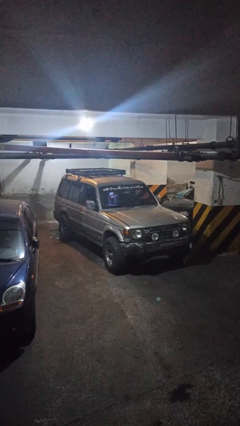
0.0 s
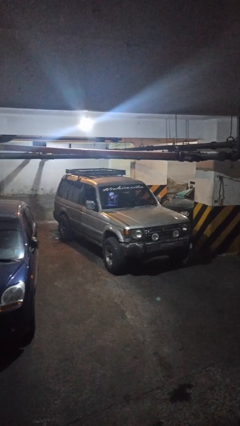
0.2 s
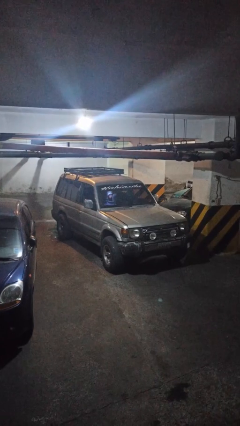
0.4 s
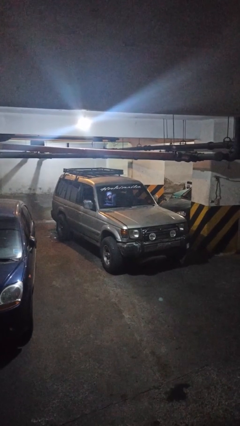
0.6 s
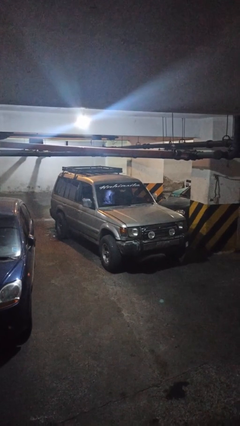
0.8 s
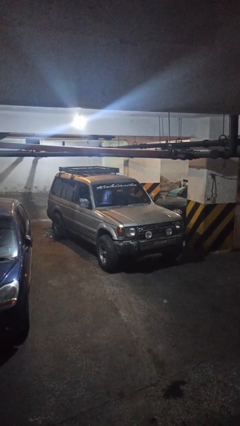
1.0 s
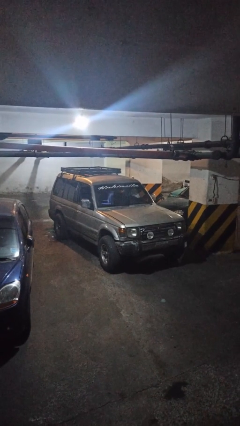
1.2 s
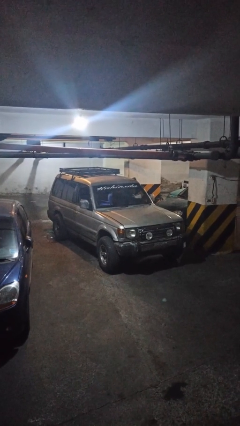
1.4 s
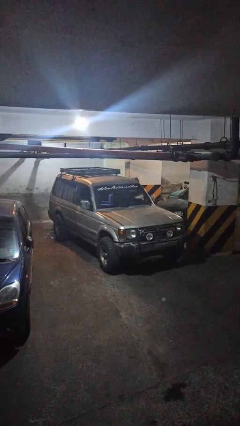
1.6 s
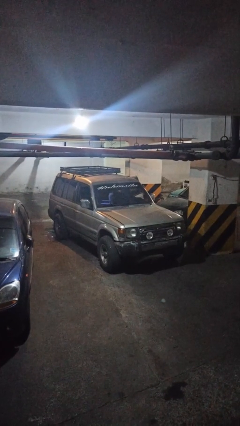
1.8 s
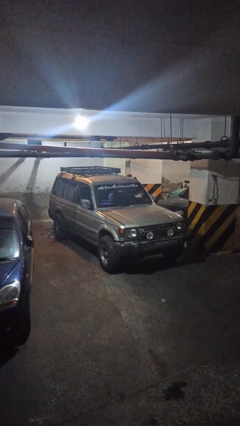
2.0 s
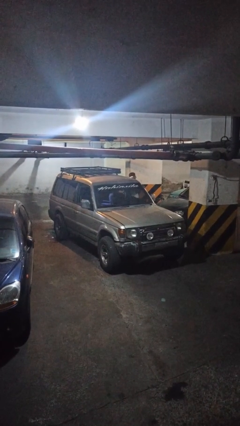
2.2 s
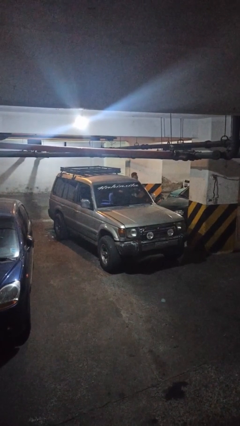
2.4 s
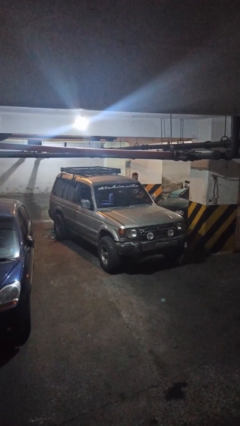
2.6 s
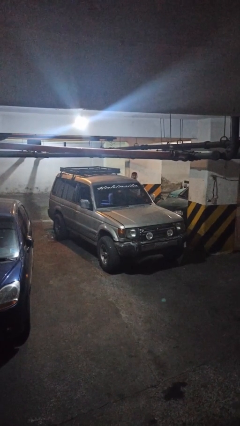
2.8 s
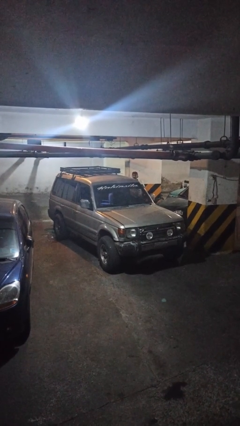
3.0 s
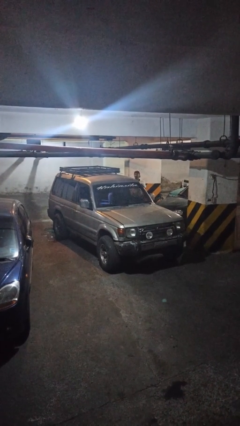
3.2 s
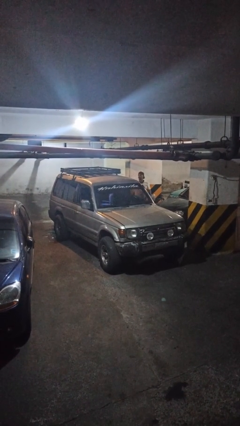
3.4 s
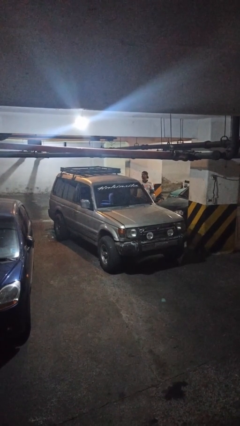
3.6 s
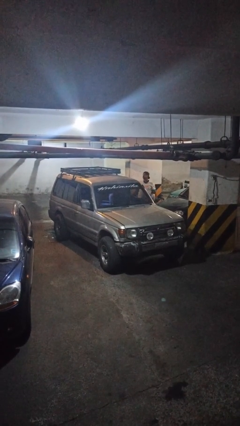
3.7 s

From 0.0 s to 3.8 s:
car drops off person

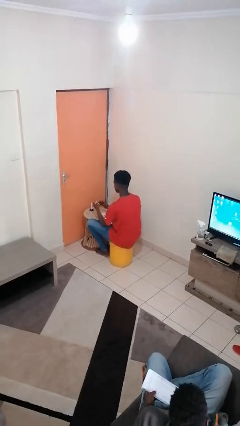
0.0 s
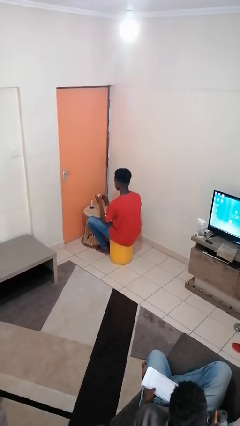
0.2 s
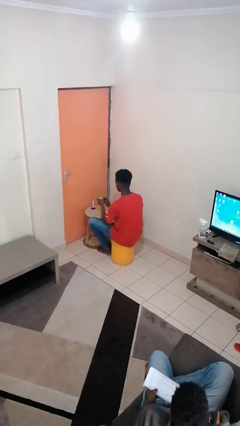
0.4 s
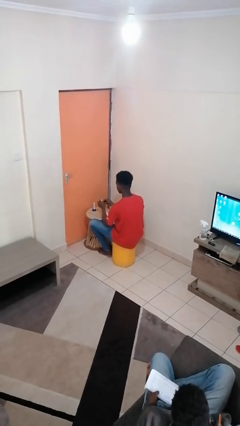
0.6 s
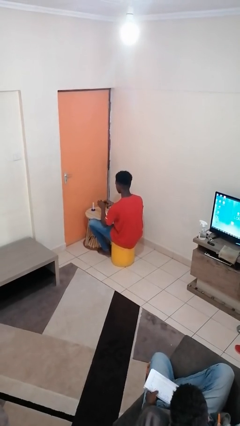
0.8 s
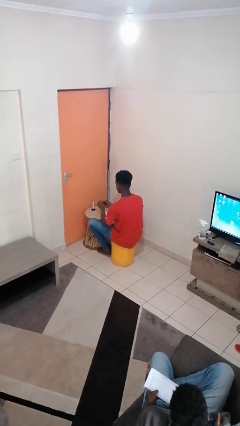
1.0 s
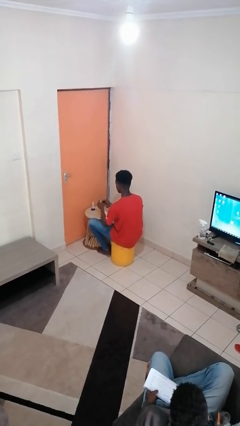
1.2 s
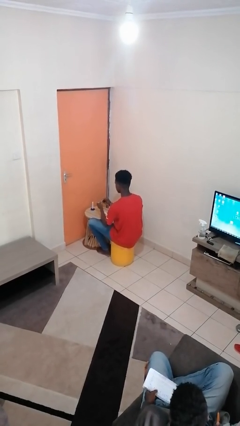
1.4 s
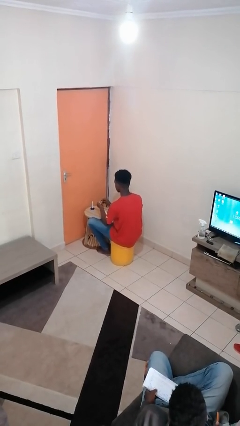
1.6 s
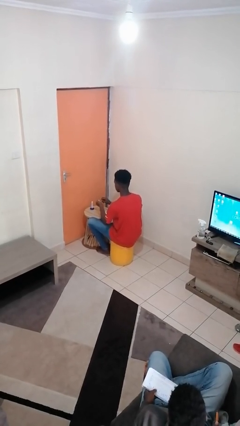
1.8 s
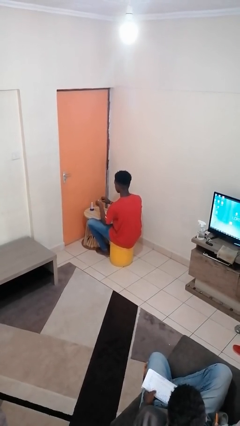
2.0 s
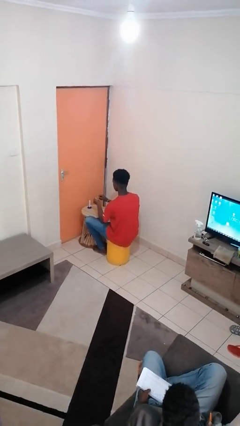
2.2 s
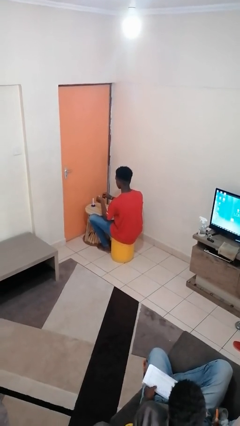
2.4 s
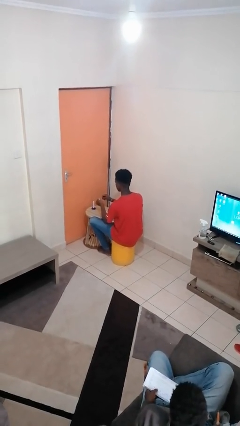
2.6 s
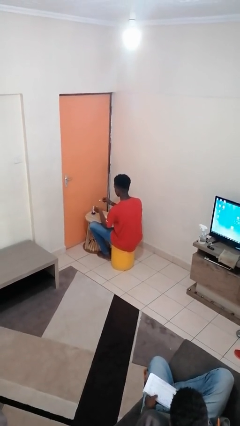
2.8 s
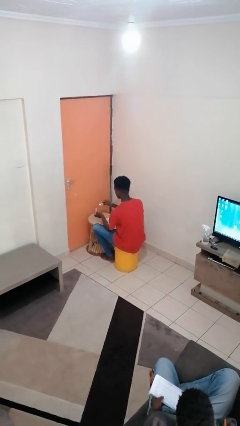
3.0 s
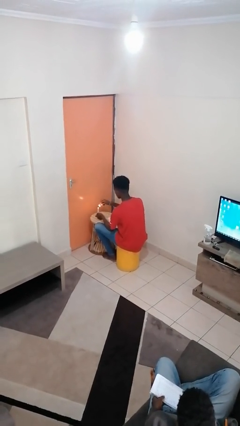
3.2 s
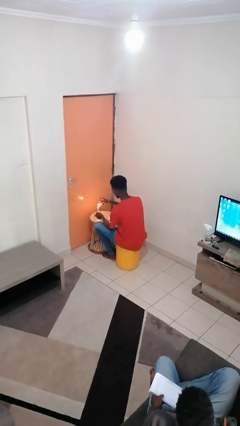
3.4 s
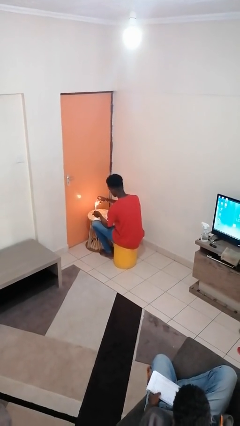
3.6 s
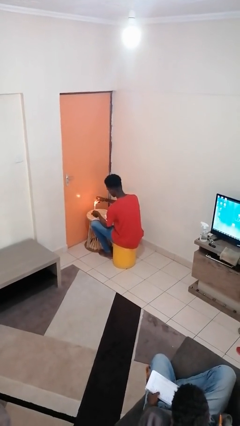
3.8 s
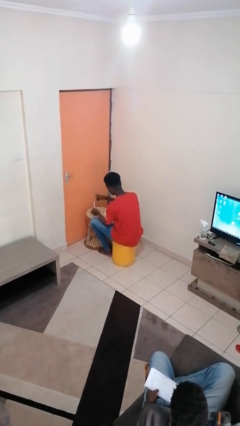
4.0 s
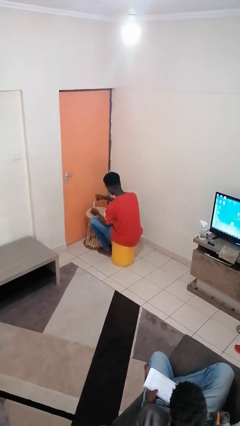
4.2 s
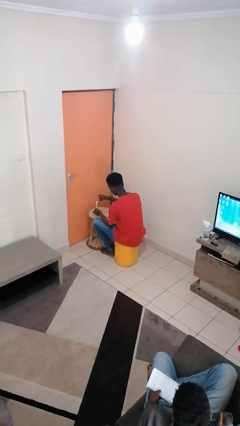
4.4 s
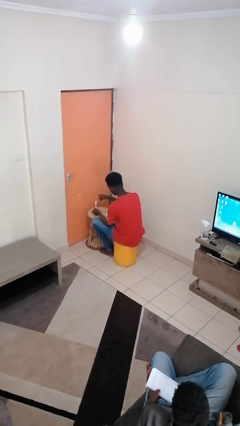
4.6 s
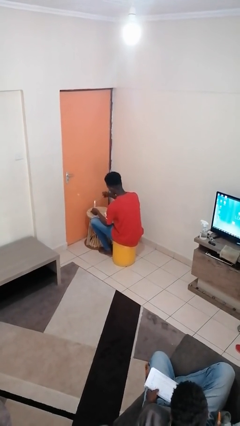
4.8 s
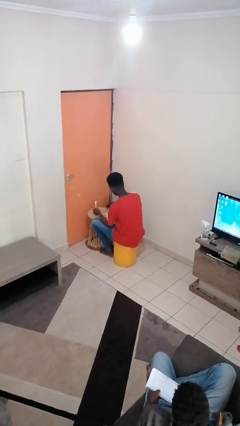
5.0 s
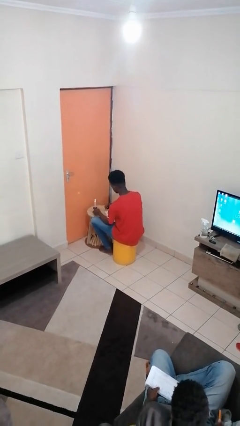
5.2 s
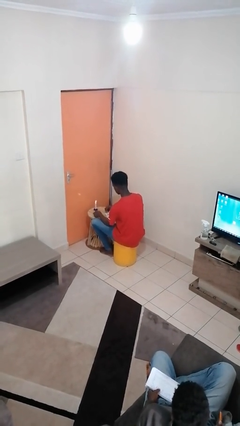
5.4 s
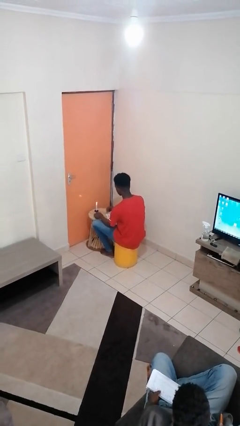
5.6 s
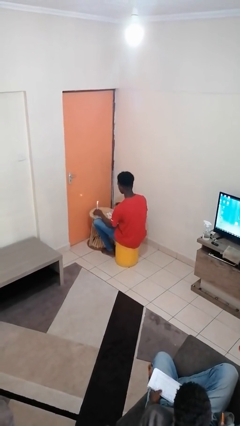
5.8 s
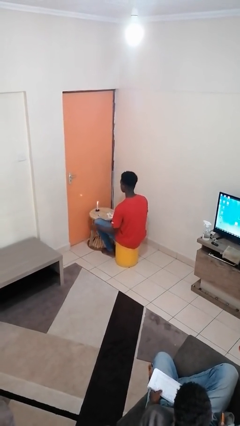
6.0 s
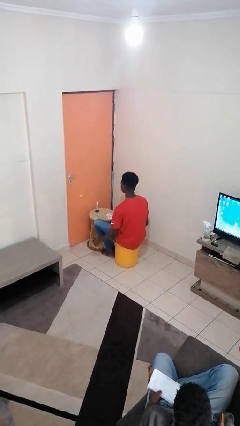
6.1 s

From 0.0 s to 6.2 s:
person lights candle

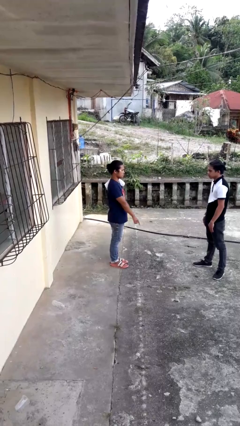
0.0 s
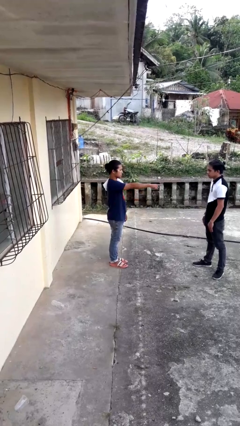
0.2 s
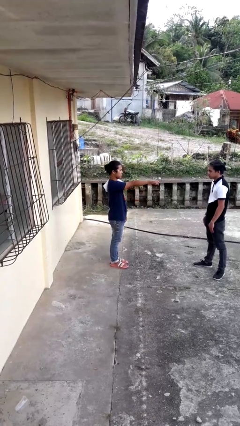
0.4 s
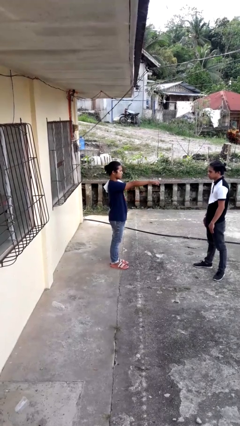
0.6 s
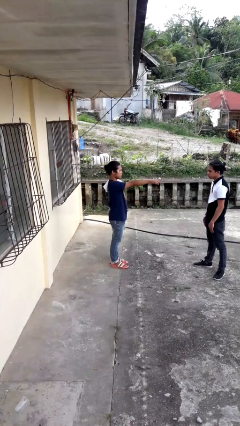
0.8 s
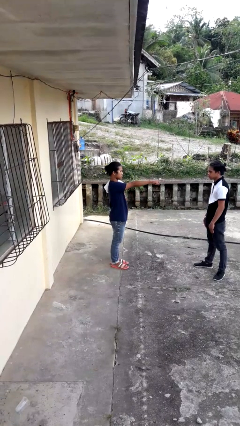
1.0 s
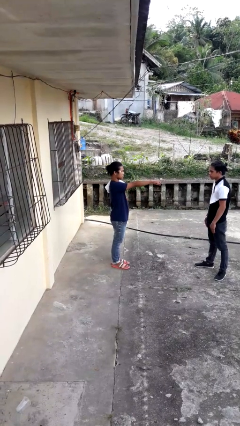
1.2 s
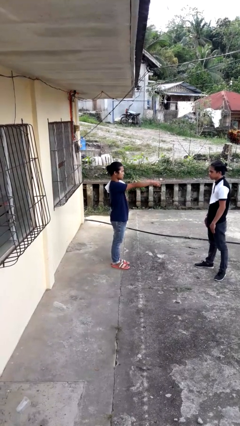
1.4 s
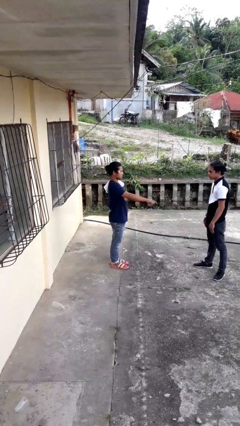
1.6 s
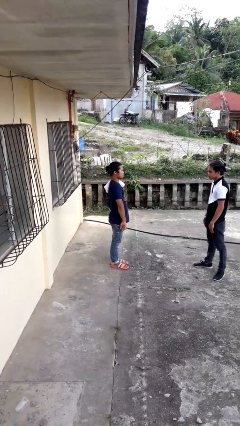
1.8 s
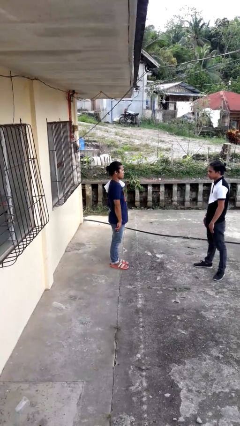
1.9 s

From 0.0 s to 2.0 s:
person points at person

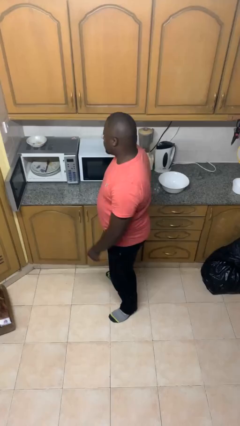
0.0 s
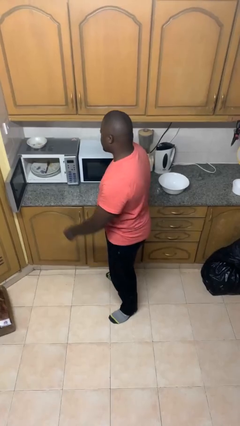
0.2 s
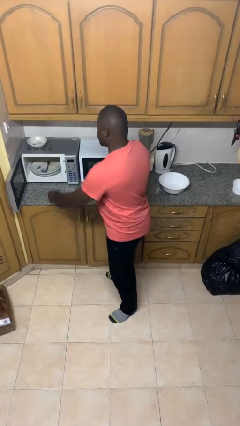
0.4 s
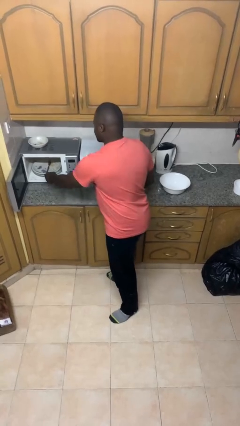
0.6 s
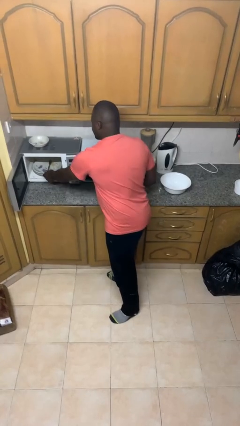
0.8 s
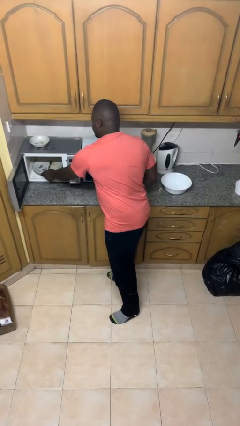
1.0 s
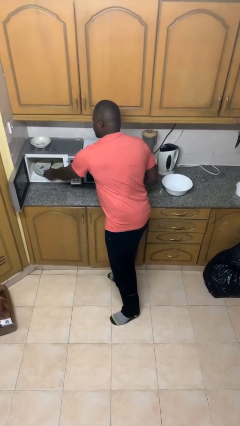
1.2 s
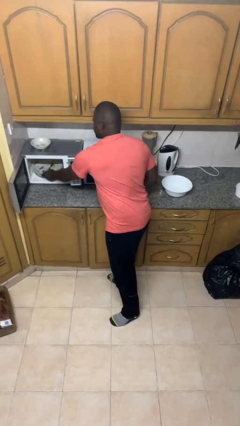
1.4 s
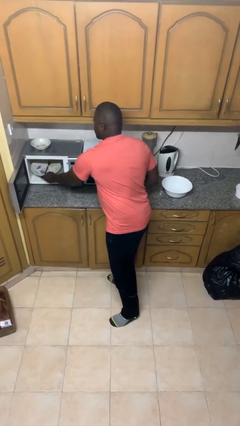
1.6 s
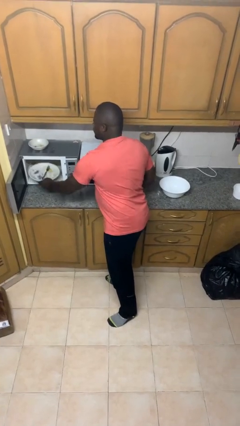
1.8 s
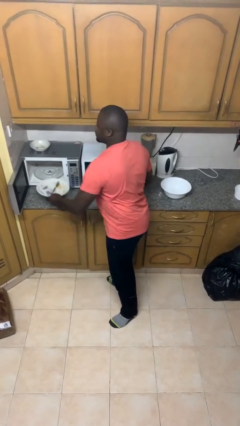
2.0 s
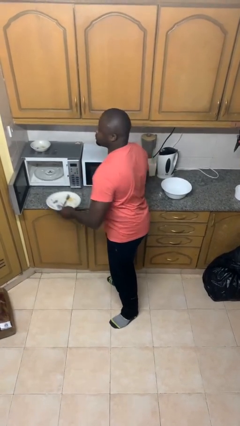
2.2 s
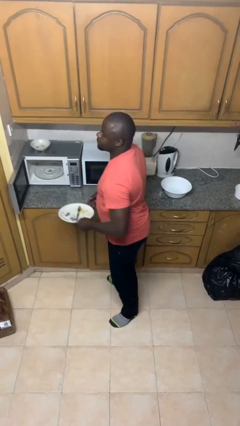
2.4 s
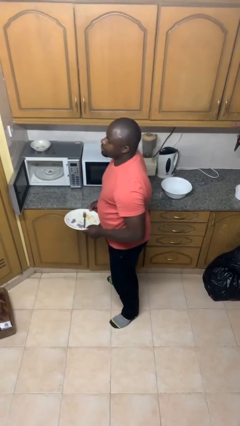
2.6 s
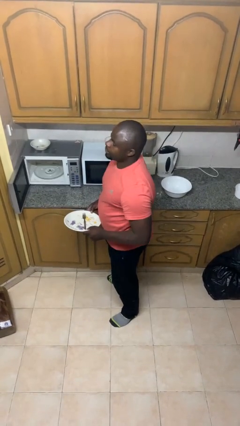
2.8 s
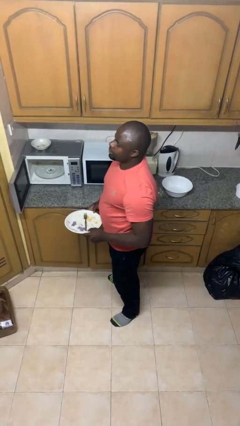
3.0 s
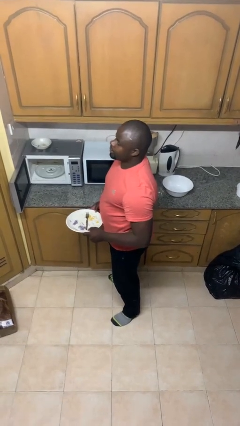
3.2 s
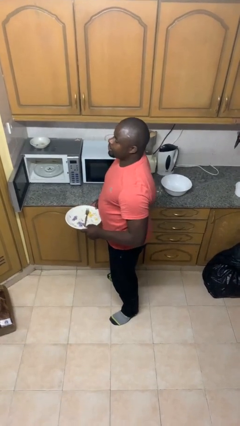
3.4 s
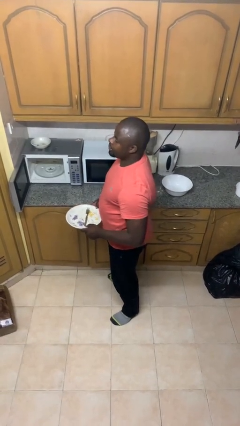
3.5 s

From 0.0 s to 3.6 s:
person takes object from microwave

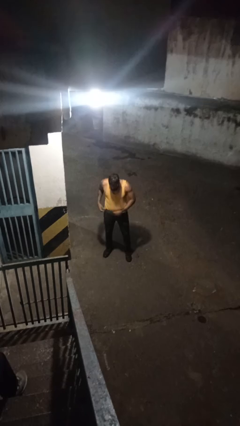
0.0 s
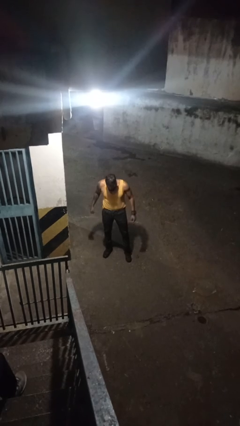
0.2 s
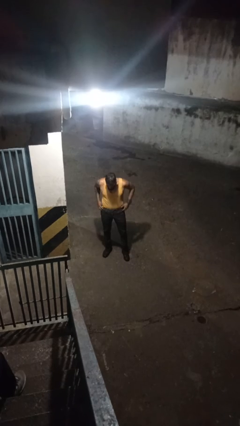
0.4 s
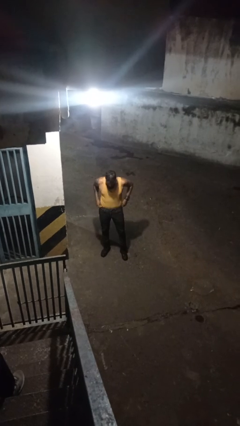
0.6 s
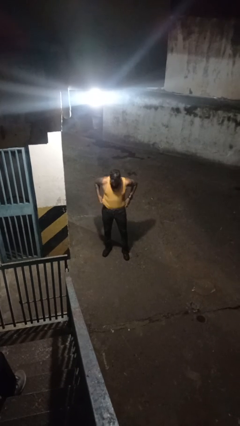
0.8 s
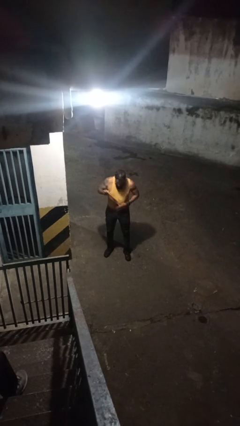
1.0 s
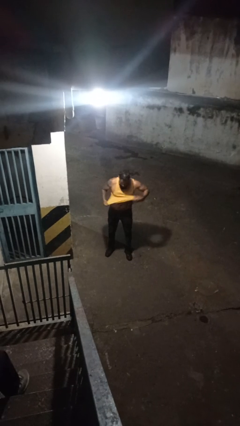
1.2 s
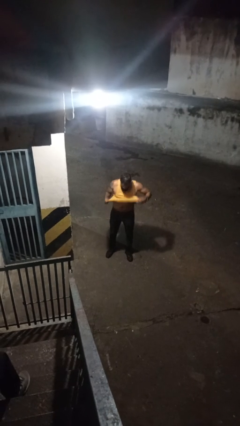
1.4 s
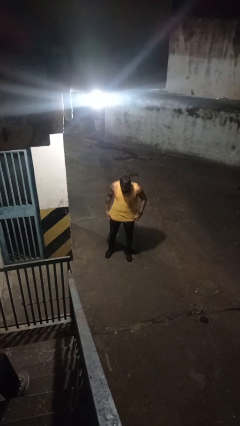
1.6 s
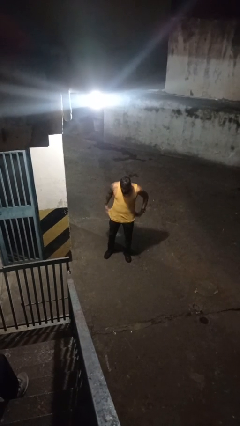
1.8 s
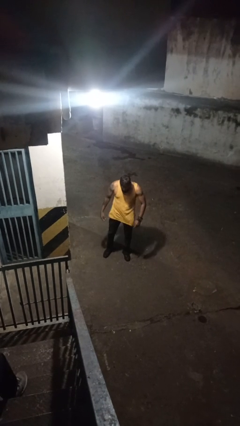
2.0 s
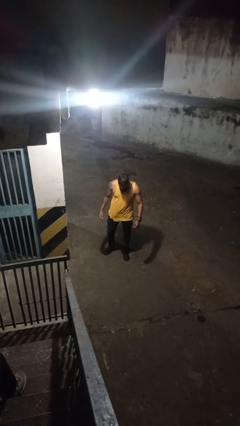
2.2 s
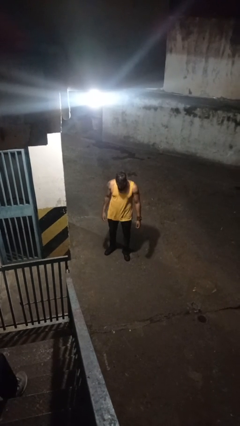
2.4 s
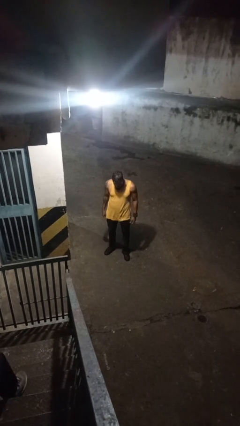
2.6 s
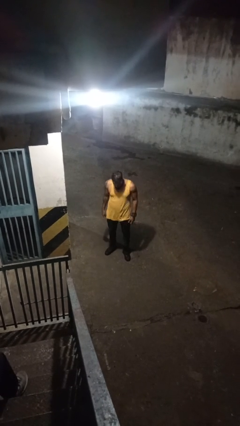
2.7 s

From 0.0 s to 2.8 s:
person untucks shirt
